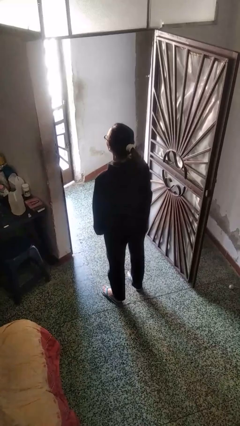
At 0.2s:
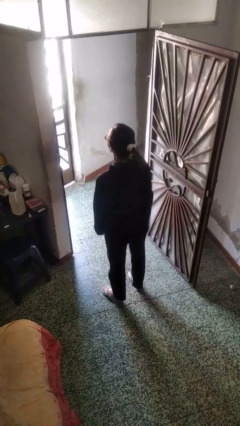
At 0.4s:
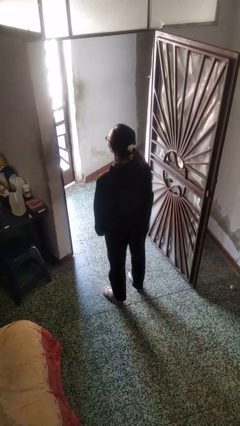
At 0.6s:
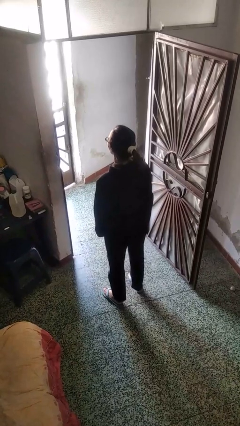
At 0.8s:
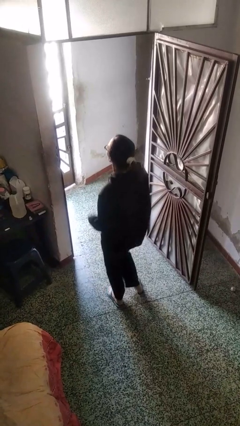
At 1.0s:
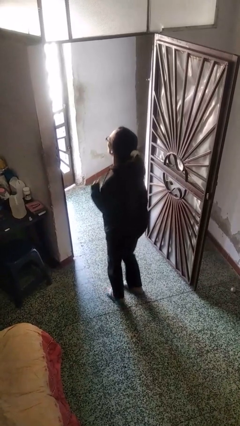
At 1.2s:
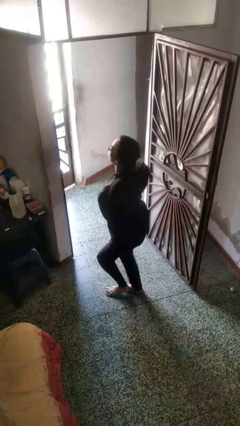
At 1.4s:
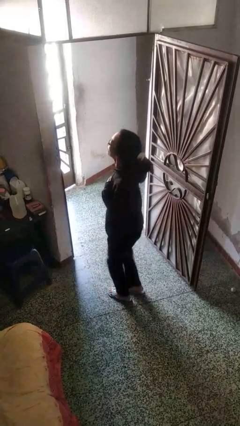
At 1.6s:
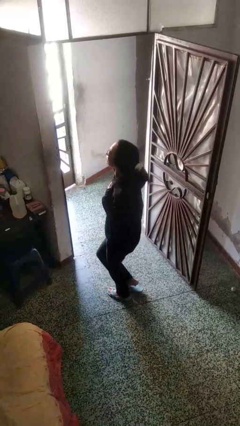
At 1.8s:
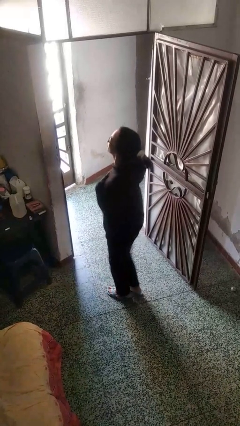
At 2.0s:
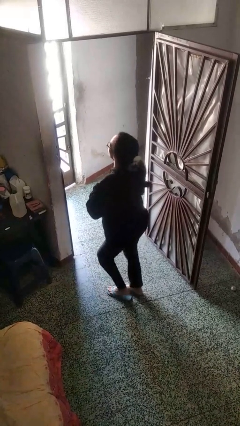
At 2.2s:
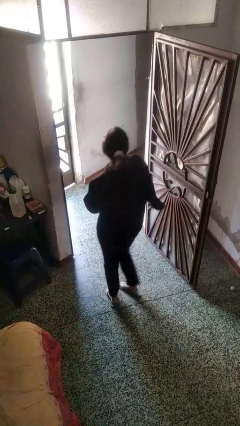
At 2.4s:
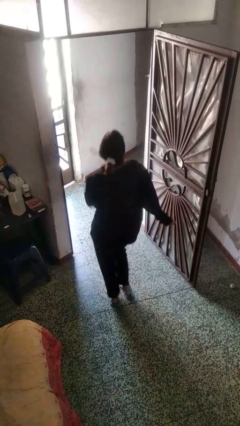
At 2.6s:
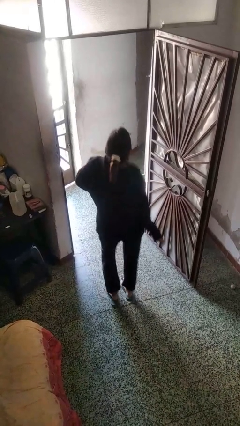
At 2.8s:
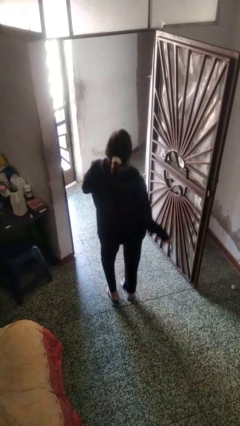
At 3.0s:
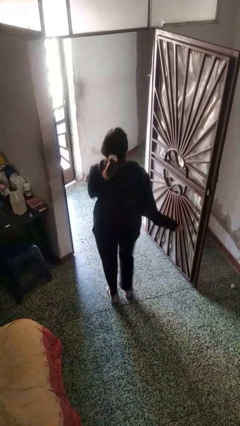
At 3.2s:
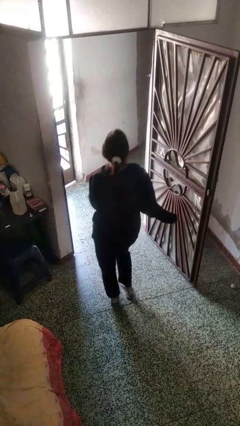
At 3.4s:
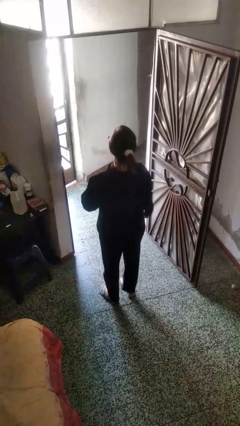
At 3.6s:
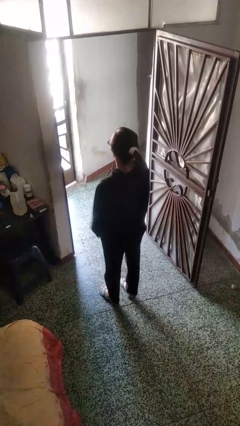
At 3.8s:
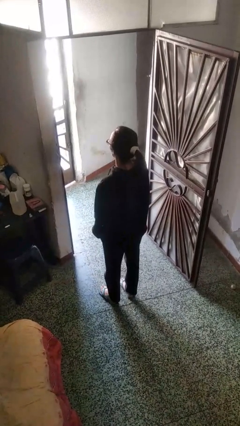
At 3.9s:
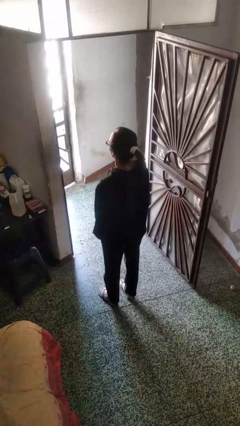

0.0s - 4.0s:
person dances in place

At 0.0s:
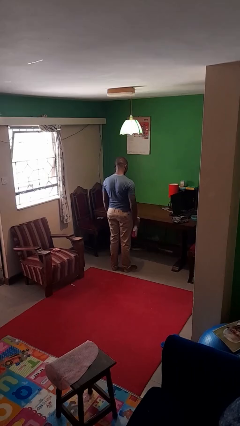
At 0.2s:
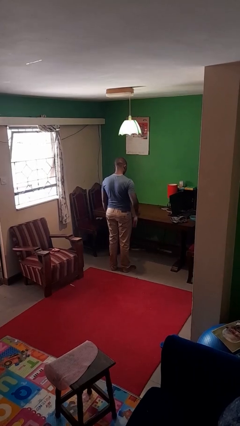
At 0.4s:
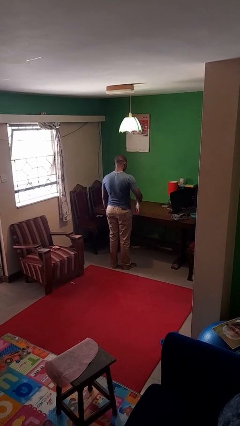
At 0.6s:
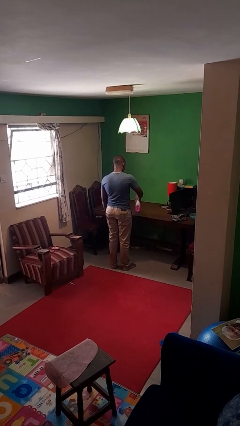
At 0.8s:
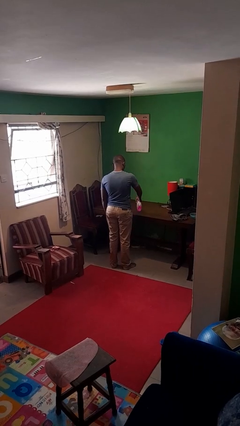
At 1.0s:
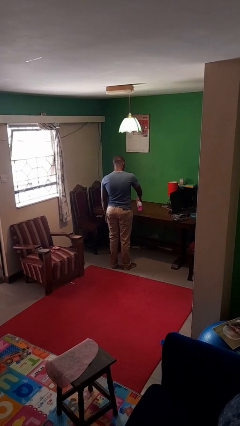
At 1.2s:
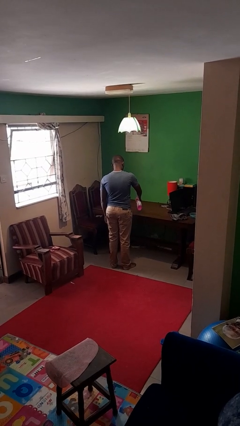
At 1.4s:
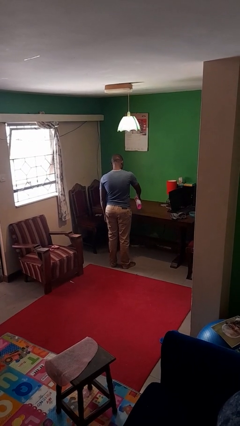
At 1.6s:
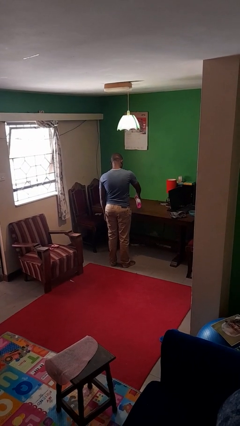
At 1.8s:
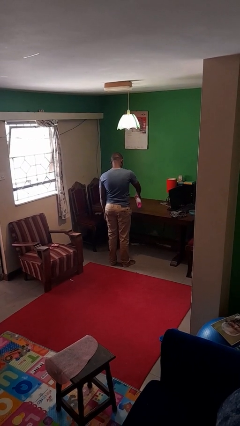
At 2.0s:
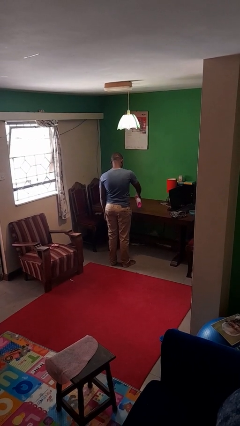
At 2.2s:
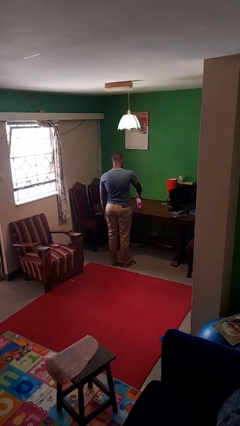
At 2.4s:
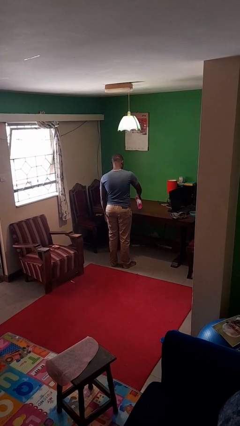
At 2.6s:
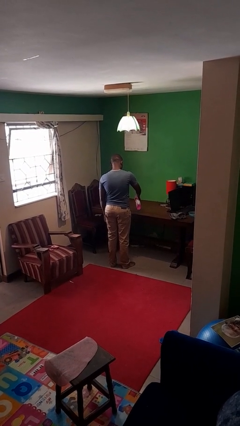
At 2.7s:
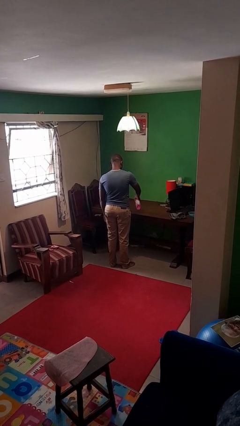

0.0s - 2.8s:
person sprays from bottle

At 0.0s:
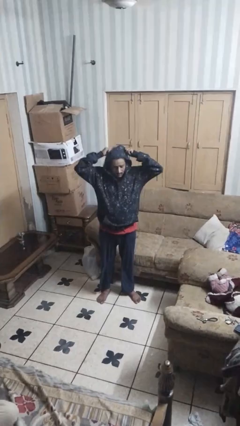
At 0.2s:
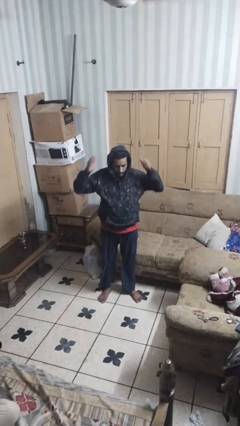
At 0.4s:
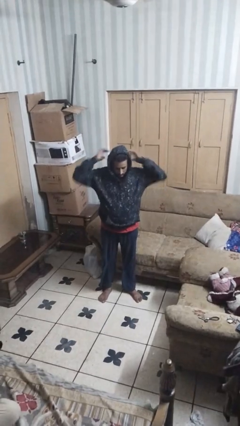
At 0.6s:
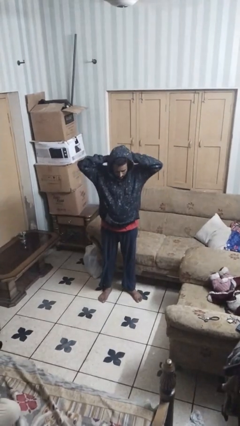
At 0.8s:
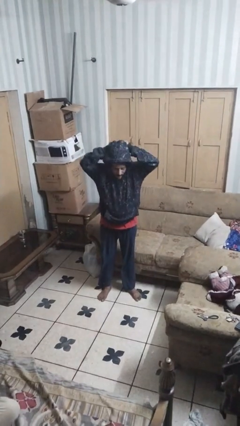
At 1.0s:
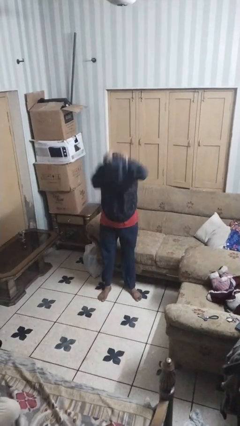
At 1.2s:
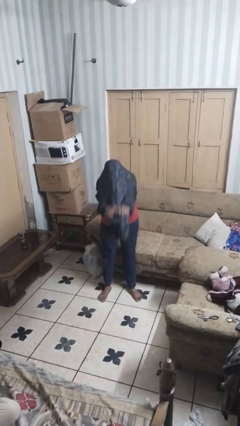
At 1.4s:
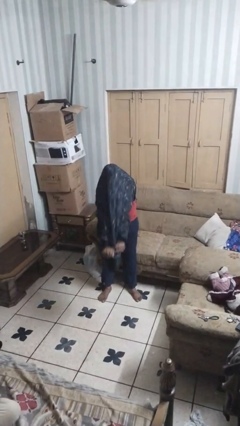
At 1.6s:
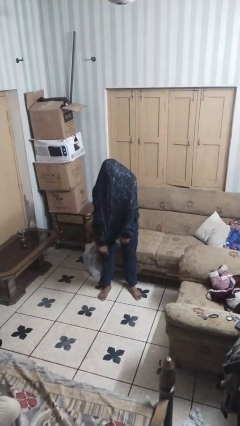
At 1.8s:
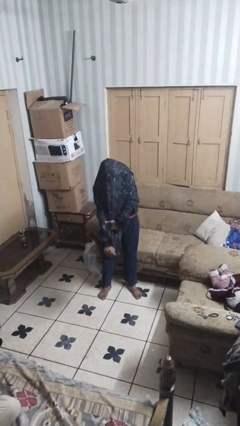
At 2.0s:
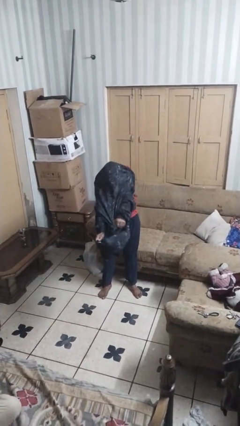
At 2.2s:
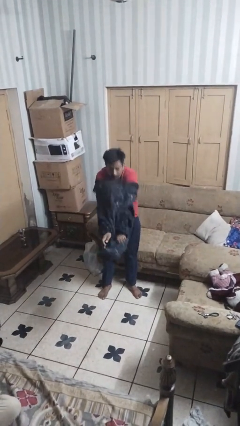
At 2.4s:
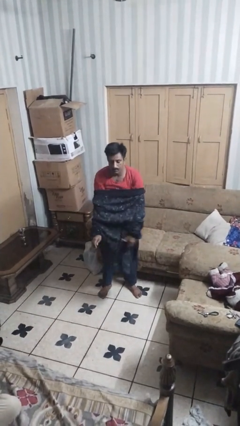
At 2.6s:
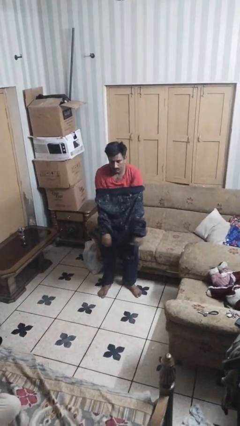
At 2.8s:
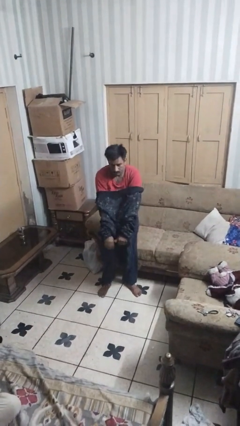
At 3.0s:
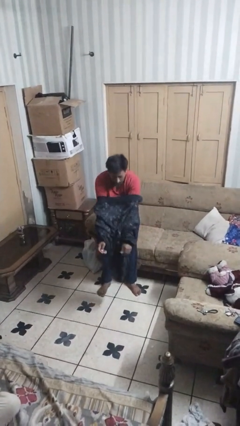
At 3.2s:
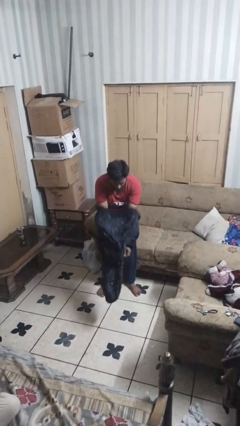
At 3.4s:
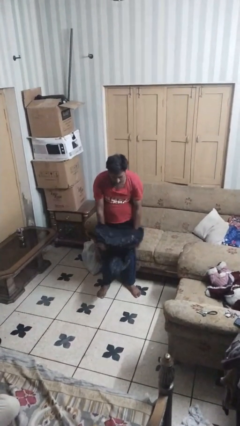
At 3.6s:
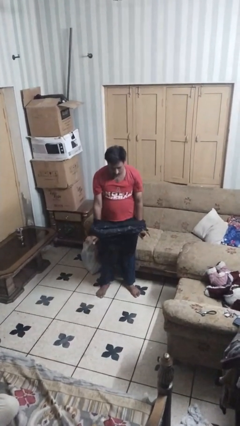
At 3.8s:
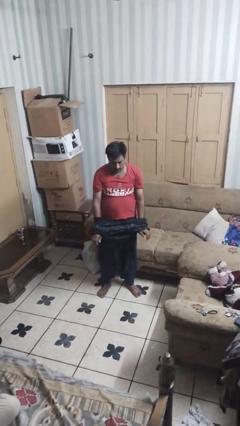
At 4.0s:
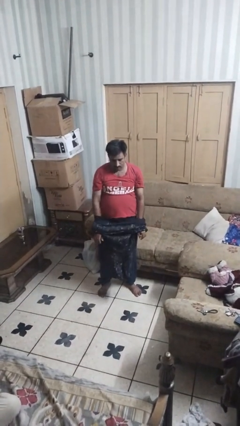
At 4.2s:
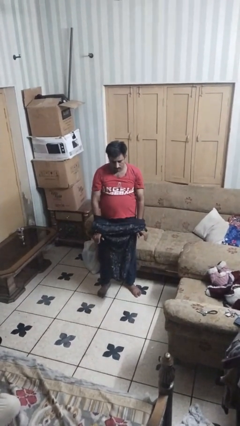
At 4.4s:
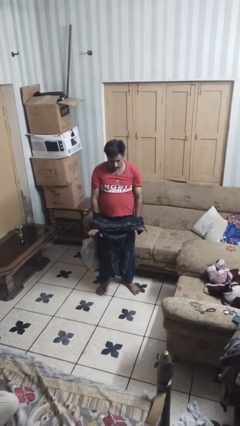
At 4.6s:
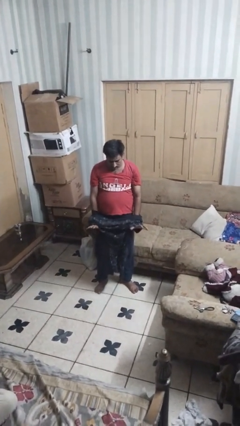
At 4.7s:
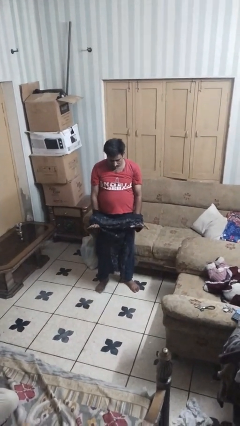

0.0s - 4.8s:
person takes off hoodie

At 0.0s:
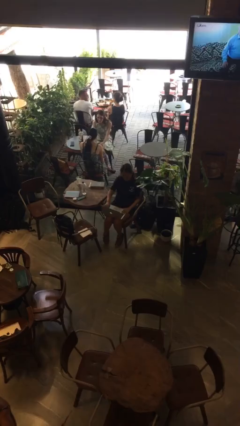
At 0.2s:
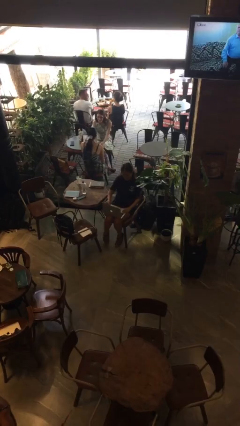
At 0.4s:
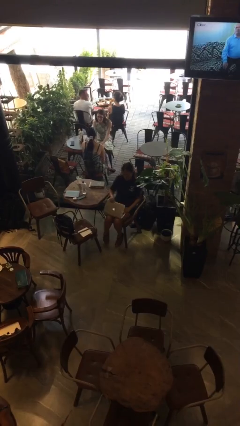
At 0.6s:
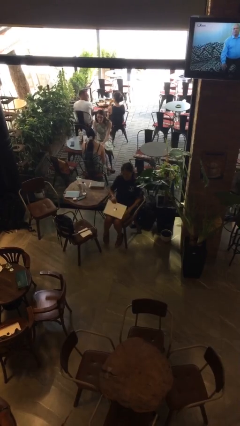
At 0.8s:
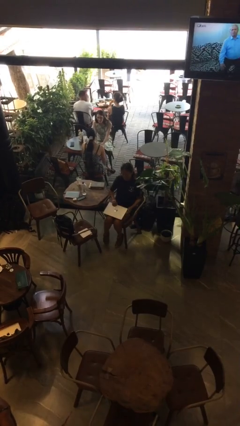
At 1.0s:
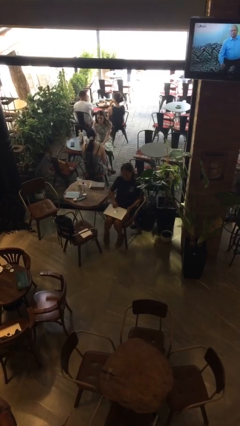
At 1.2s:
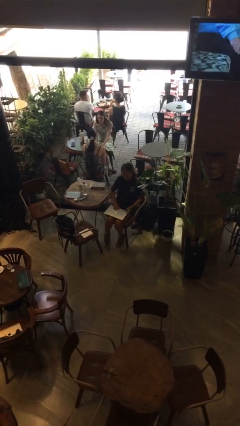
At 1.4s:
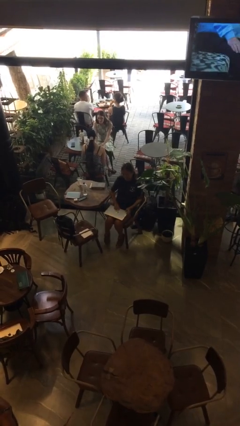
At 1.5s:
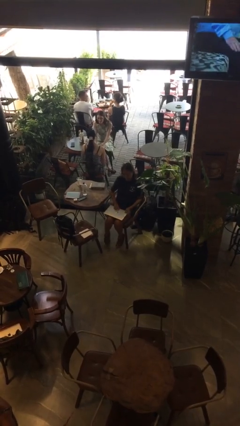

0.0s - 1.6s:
person closes laptop

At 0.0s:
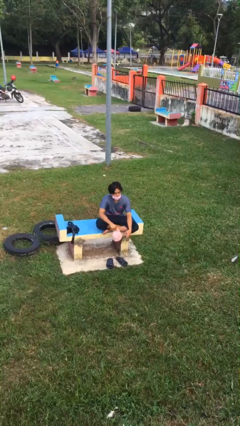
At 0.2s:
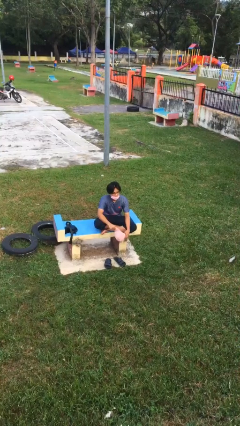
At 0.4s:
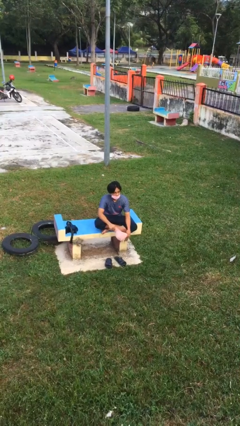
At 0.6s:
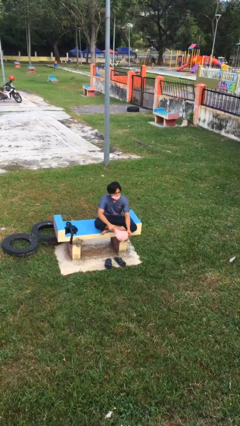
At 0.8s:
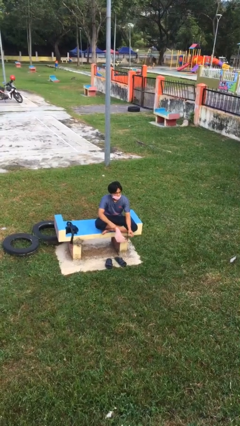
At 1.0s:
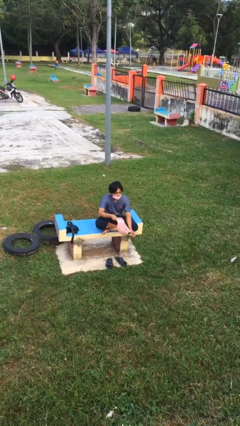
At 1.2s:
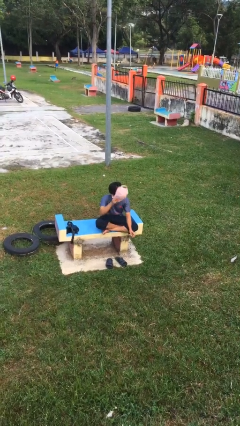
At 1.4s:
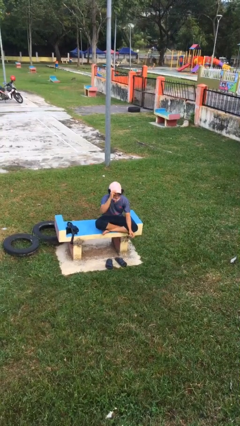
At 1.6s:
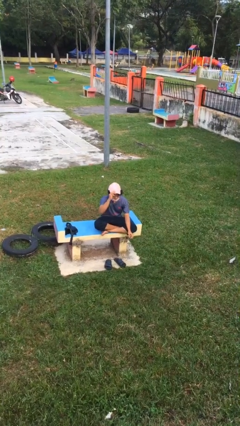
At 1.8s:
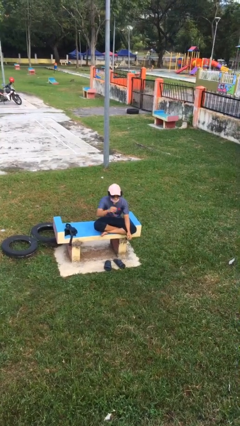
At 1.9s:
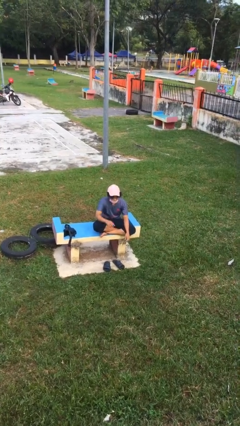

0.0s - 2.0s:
person puts on hat

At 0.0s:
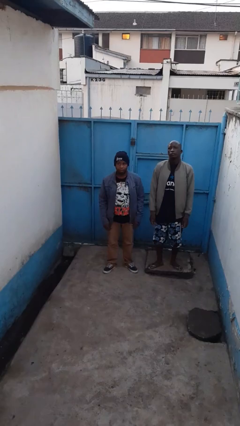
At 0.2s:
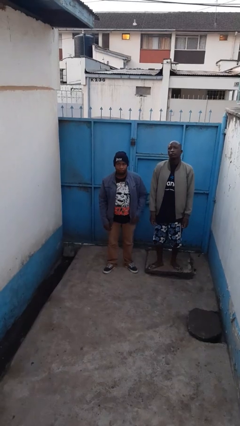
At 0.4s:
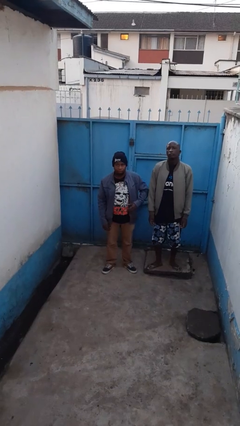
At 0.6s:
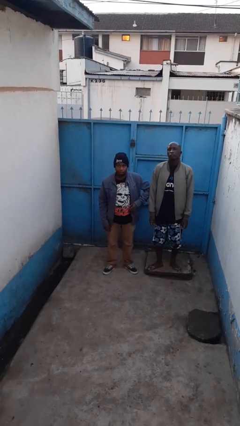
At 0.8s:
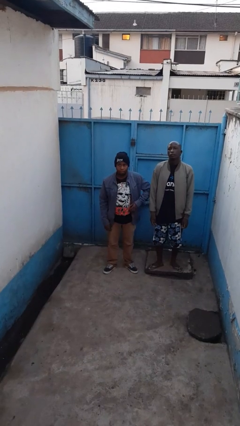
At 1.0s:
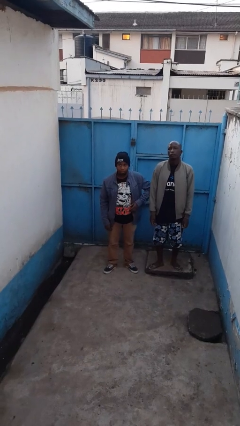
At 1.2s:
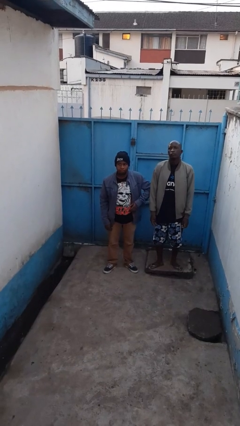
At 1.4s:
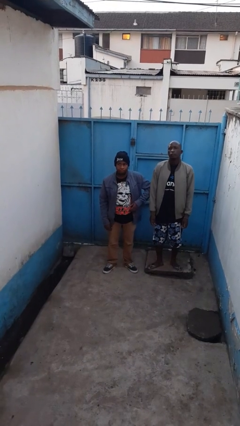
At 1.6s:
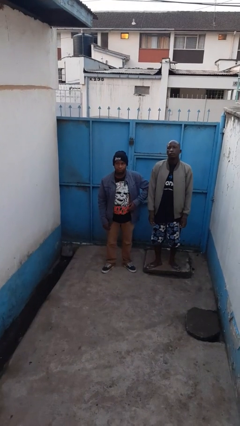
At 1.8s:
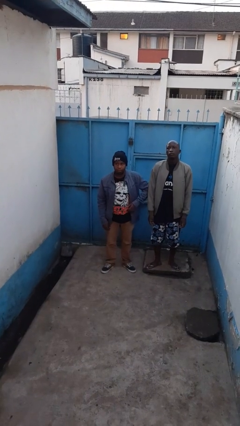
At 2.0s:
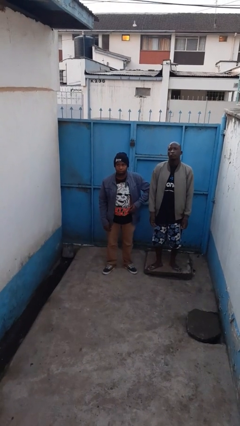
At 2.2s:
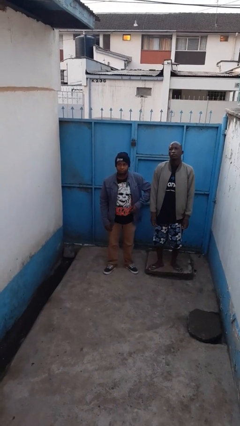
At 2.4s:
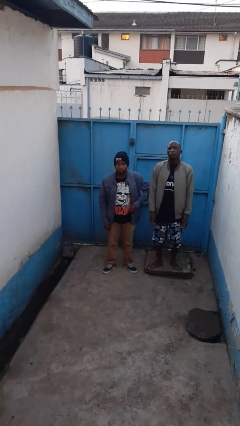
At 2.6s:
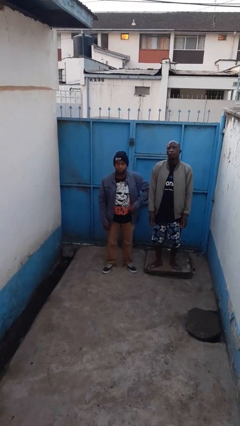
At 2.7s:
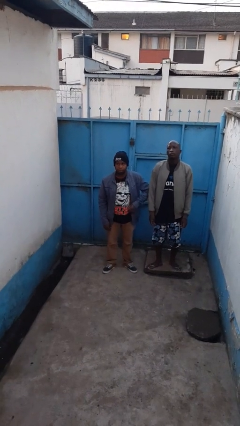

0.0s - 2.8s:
person nudges person with elbow
